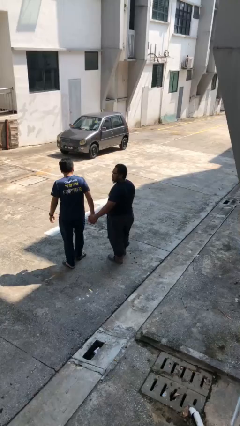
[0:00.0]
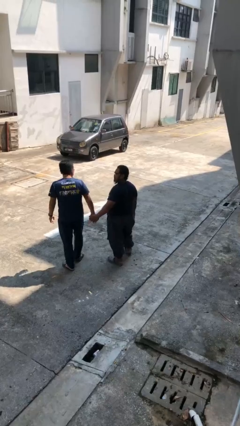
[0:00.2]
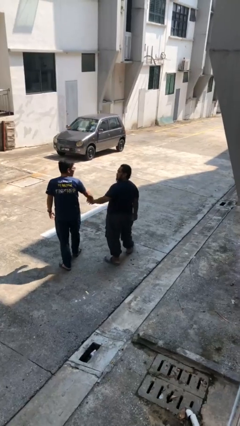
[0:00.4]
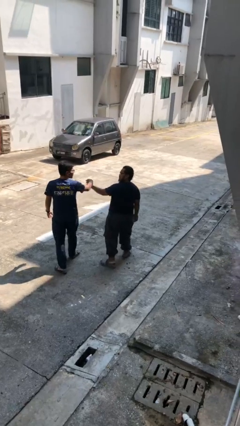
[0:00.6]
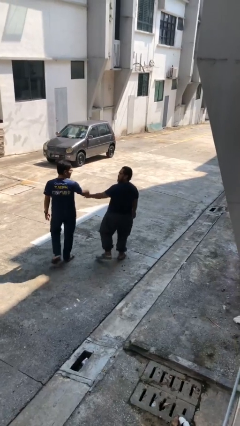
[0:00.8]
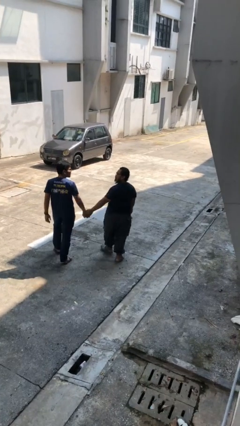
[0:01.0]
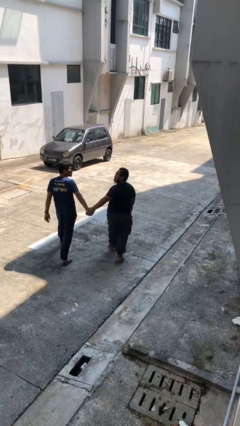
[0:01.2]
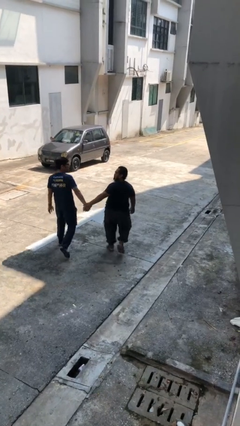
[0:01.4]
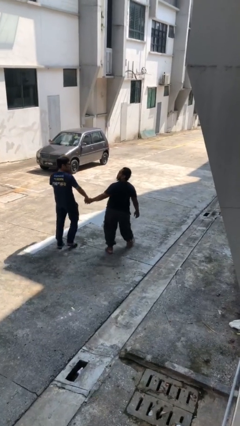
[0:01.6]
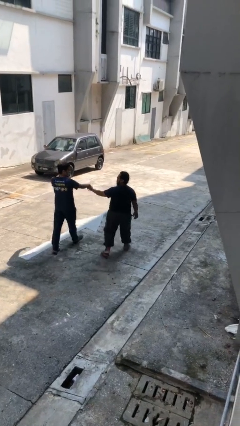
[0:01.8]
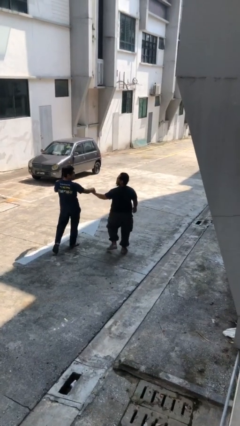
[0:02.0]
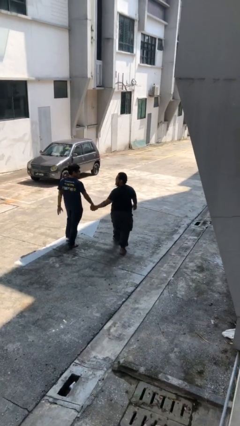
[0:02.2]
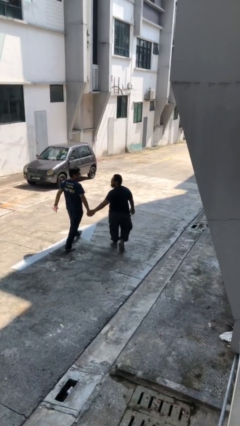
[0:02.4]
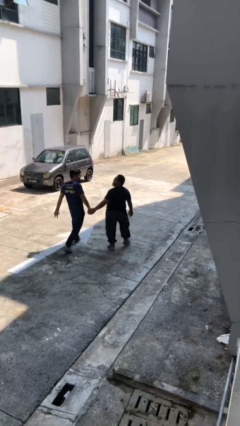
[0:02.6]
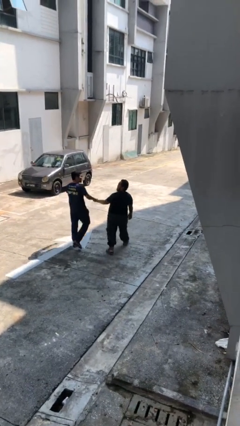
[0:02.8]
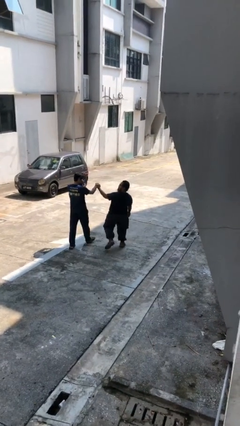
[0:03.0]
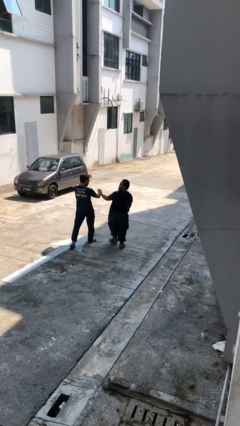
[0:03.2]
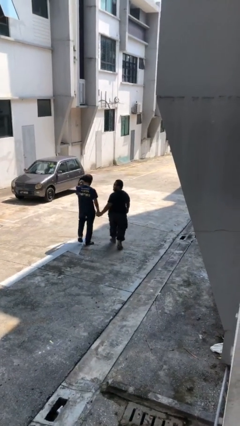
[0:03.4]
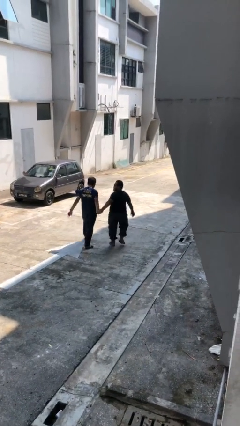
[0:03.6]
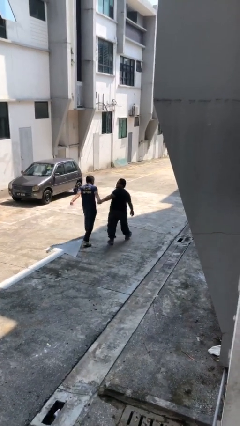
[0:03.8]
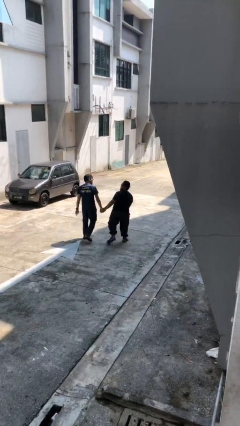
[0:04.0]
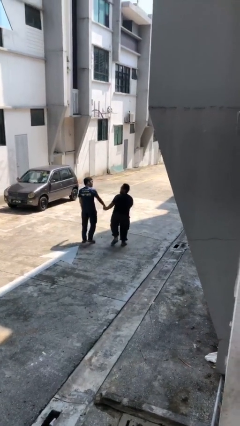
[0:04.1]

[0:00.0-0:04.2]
person holds hand

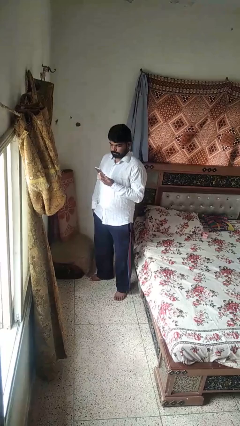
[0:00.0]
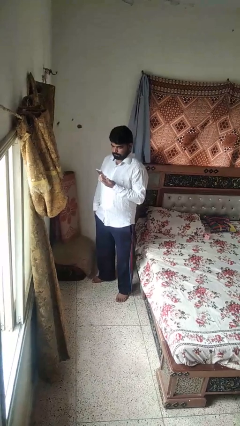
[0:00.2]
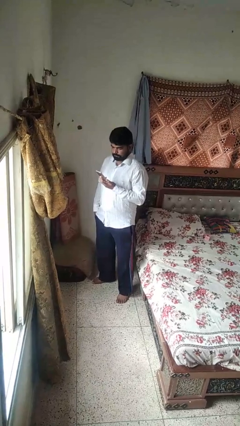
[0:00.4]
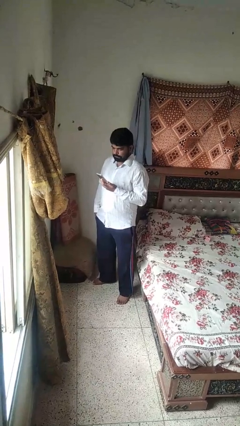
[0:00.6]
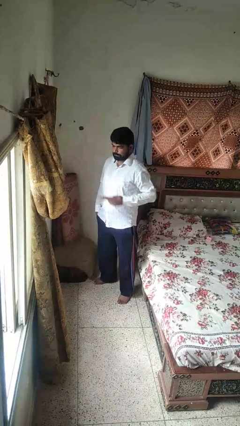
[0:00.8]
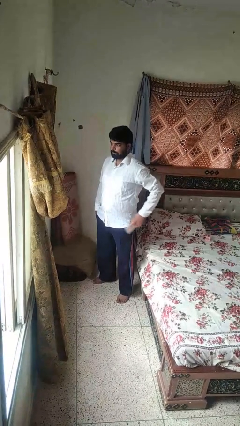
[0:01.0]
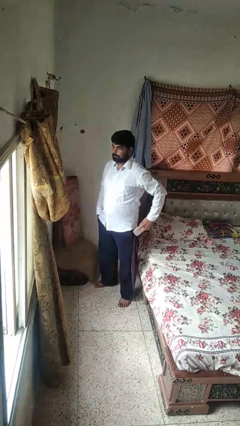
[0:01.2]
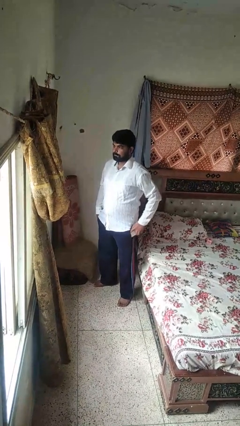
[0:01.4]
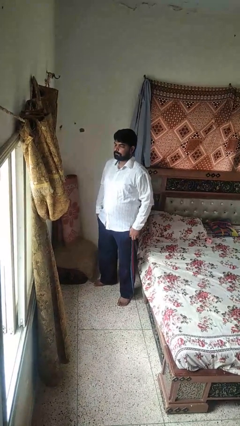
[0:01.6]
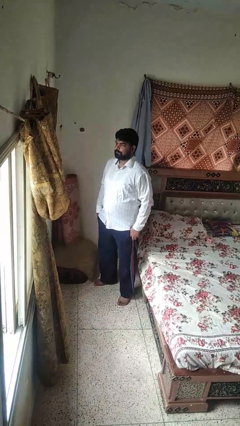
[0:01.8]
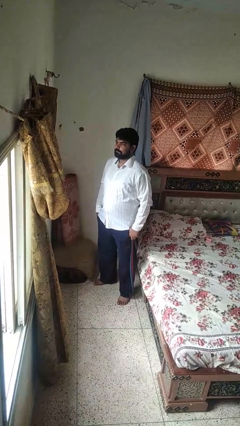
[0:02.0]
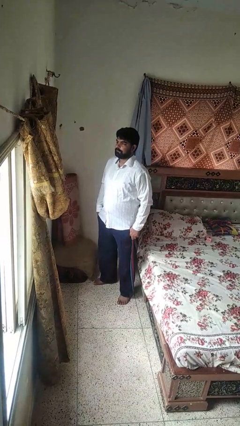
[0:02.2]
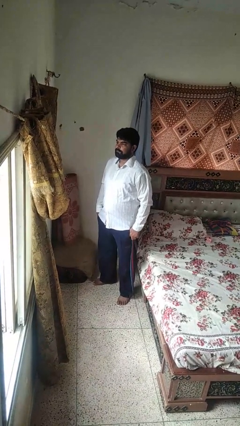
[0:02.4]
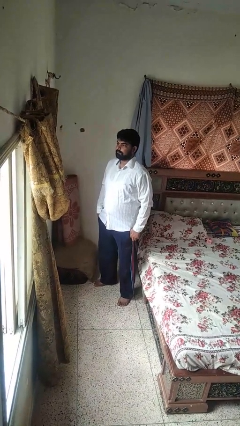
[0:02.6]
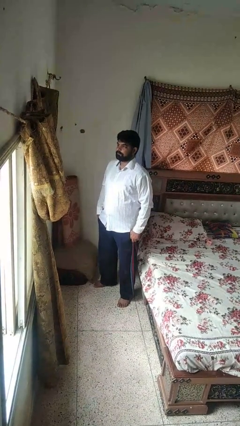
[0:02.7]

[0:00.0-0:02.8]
person puts phone into pocket

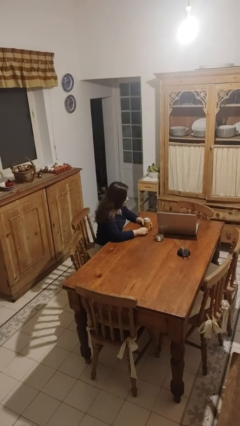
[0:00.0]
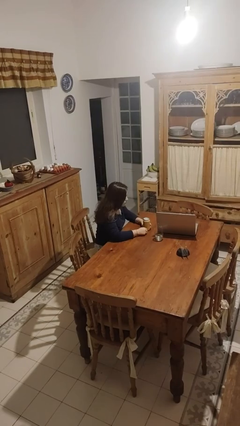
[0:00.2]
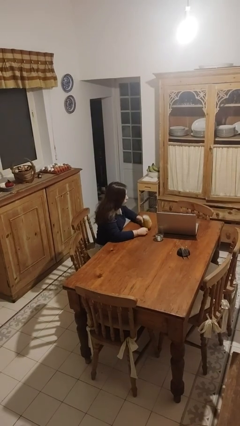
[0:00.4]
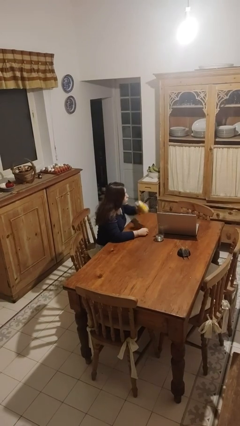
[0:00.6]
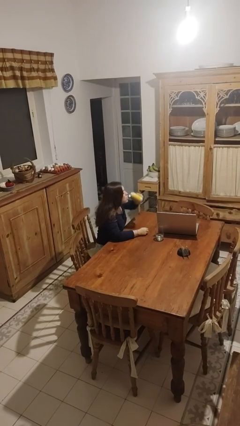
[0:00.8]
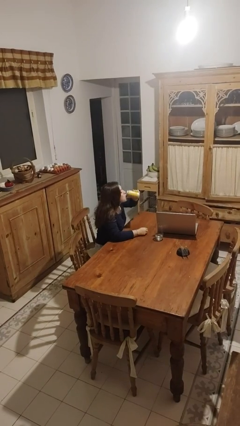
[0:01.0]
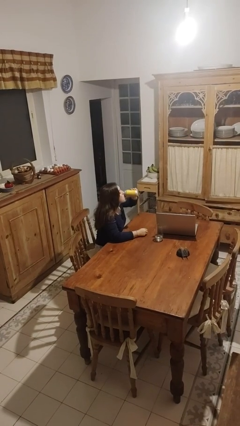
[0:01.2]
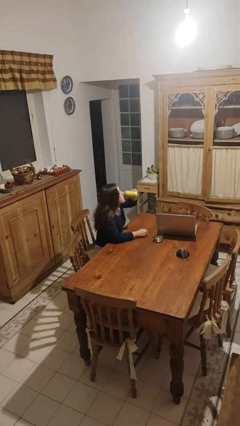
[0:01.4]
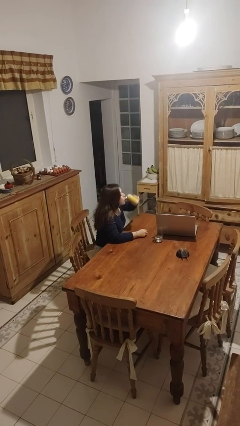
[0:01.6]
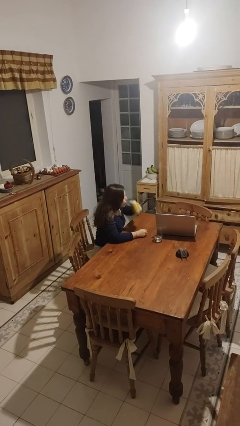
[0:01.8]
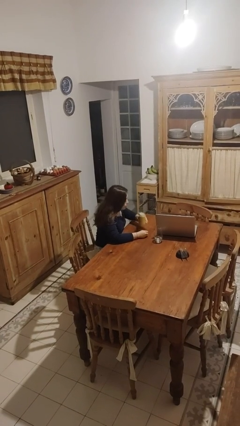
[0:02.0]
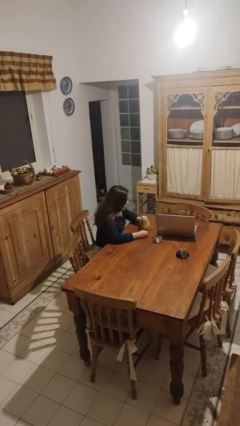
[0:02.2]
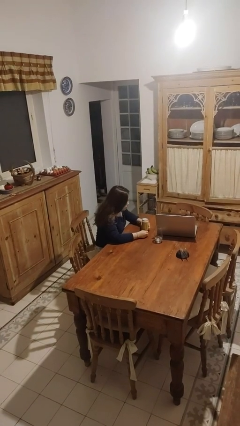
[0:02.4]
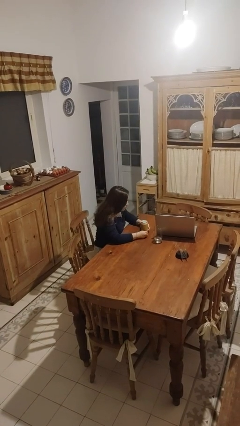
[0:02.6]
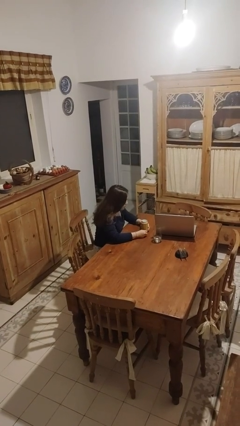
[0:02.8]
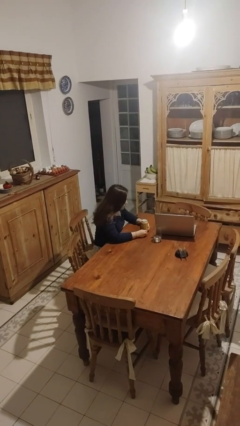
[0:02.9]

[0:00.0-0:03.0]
person drinks from beverage can

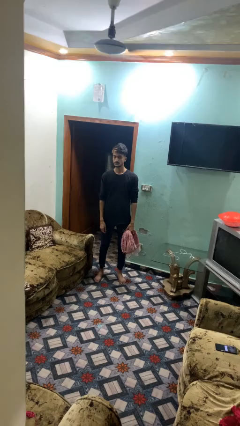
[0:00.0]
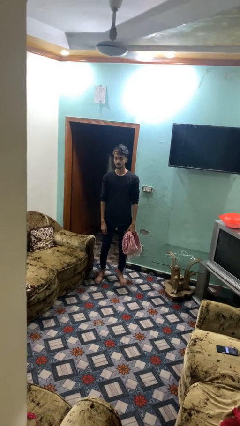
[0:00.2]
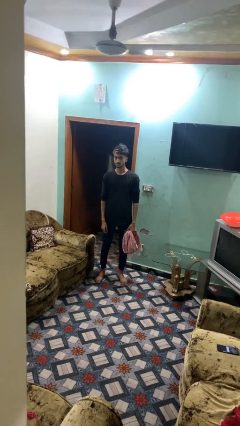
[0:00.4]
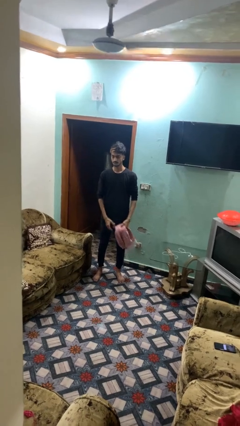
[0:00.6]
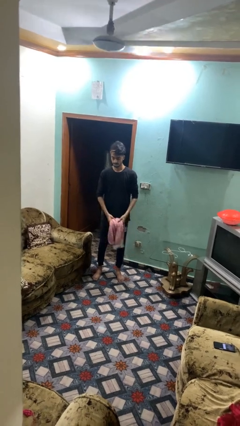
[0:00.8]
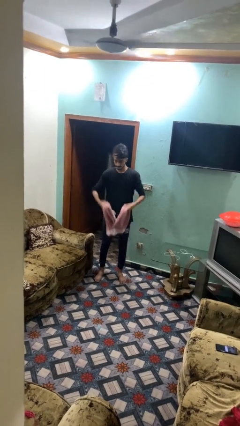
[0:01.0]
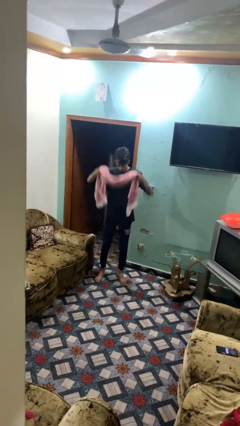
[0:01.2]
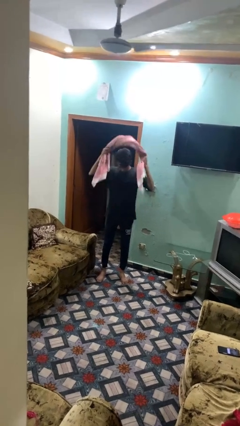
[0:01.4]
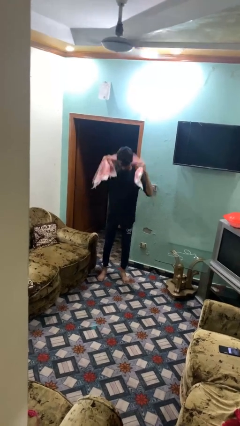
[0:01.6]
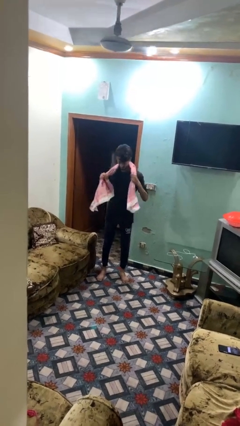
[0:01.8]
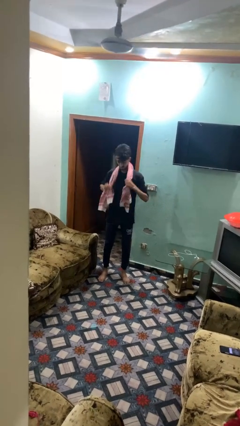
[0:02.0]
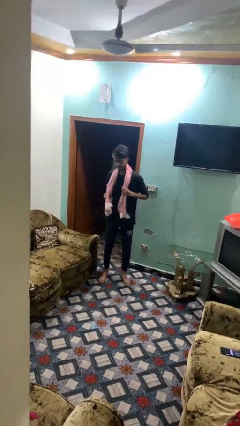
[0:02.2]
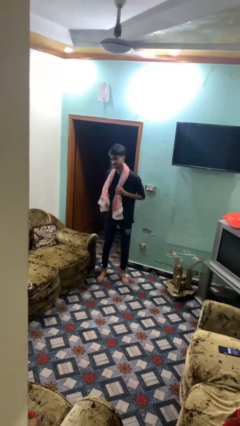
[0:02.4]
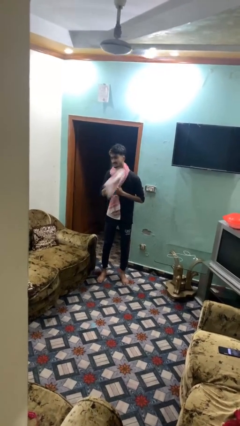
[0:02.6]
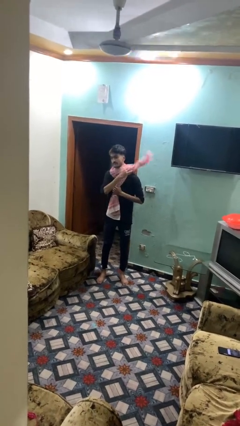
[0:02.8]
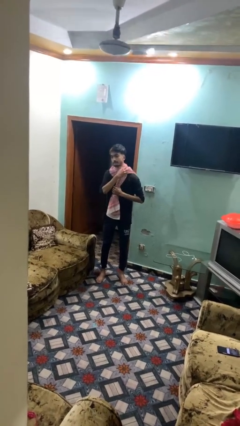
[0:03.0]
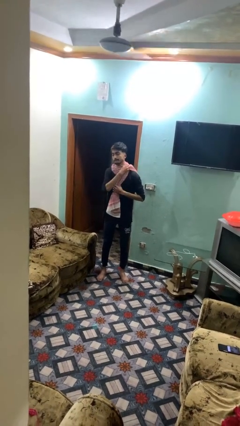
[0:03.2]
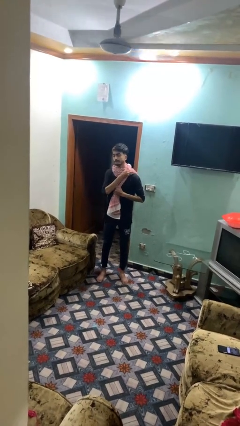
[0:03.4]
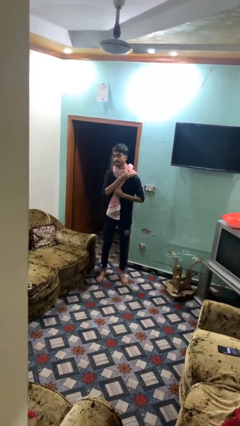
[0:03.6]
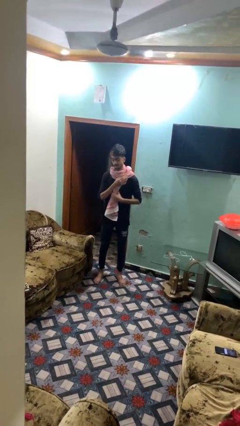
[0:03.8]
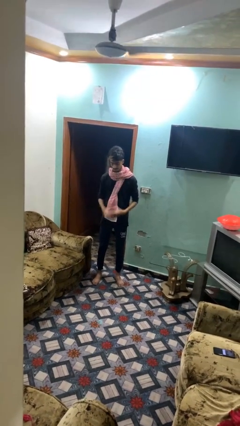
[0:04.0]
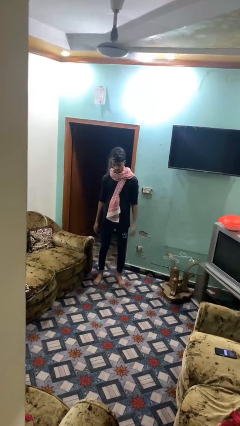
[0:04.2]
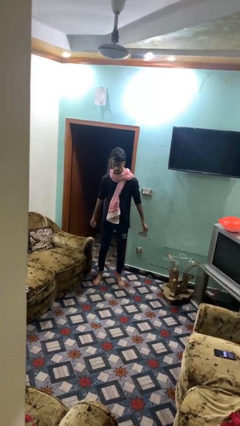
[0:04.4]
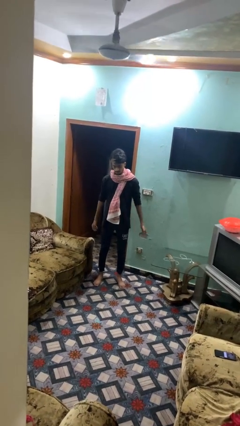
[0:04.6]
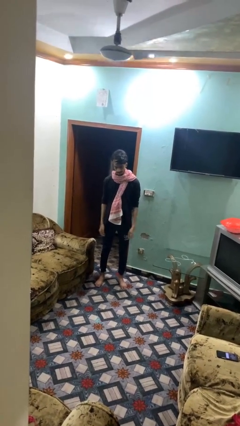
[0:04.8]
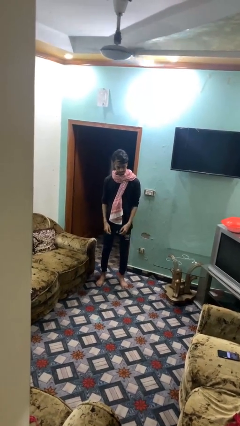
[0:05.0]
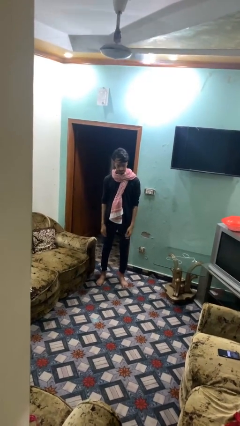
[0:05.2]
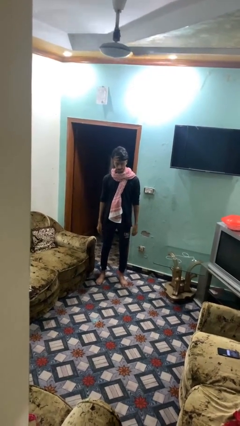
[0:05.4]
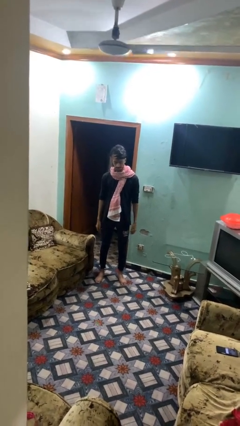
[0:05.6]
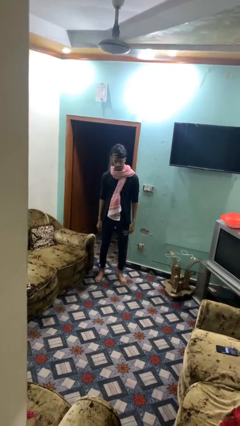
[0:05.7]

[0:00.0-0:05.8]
person puts on scarf

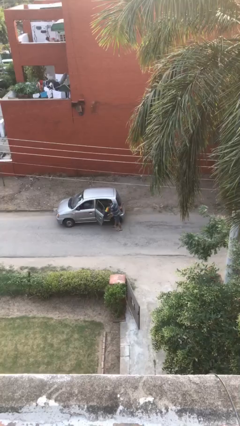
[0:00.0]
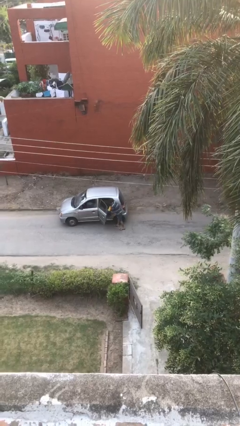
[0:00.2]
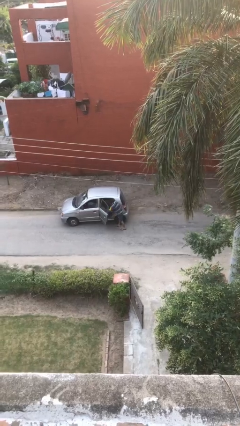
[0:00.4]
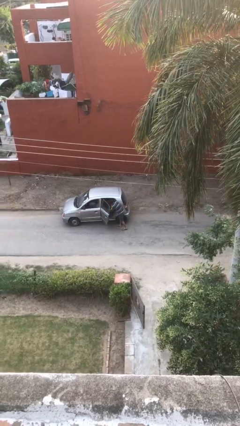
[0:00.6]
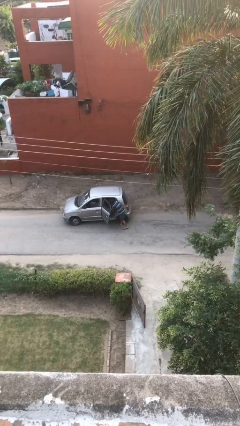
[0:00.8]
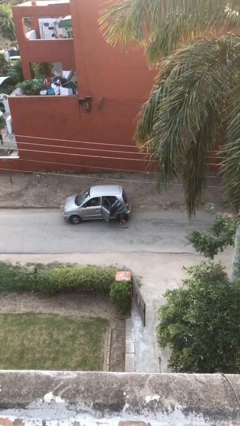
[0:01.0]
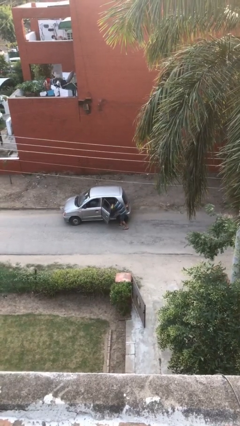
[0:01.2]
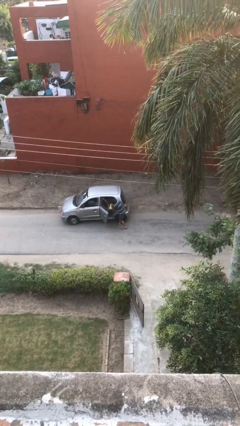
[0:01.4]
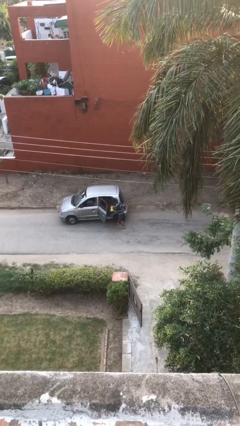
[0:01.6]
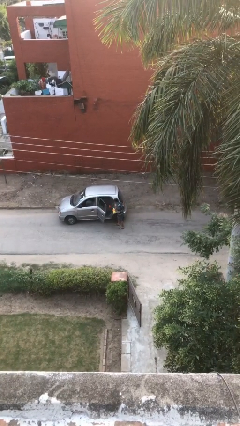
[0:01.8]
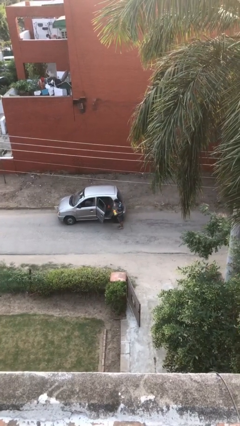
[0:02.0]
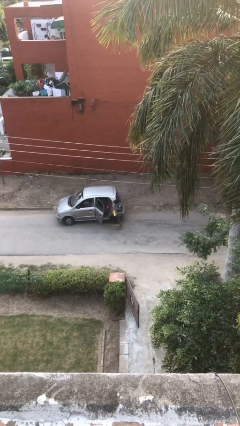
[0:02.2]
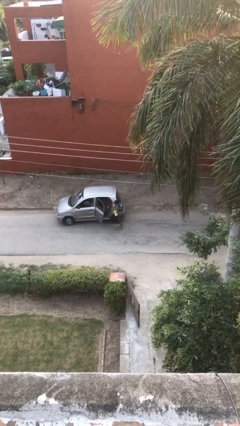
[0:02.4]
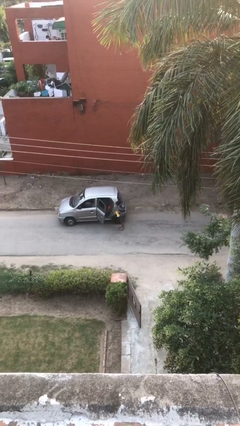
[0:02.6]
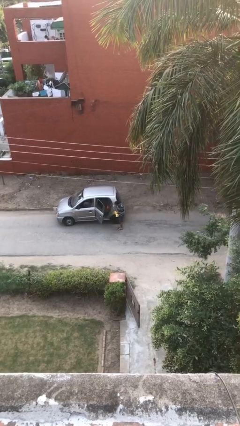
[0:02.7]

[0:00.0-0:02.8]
person unloads car
